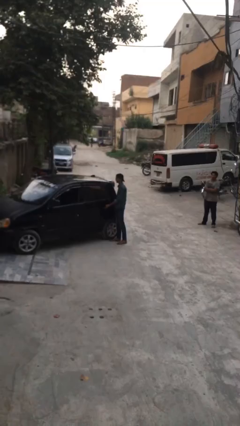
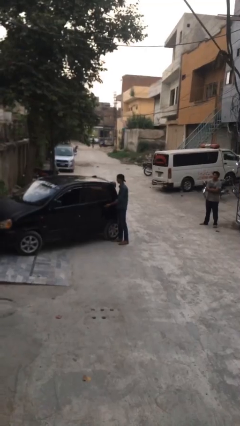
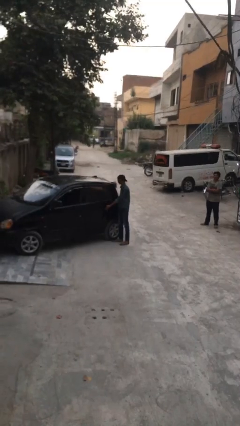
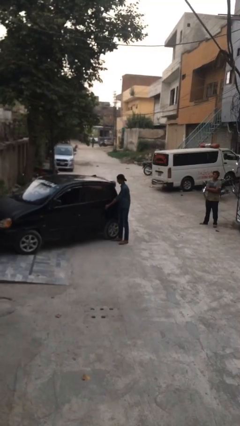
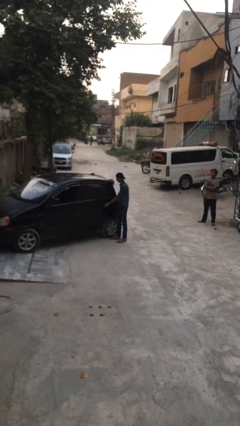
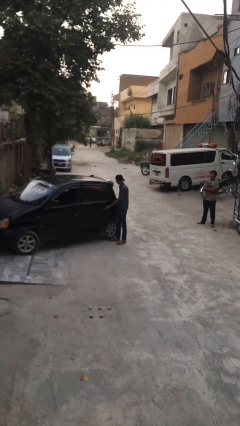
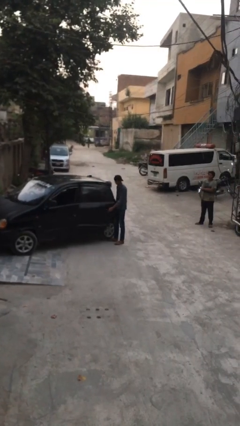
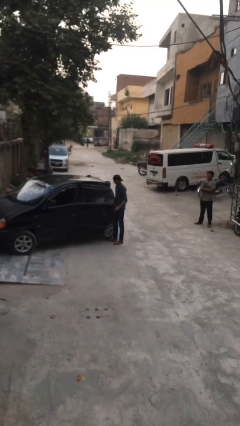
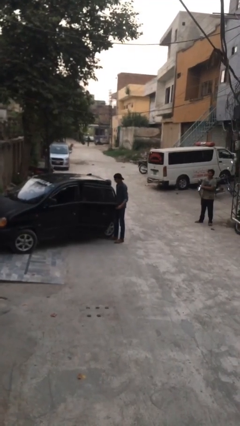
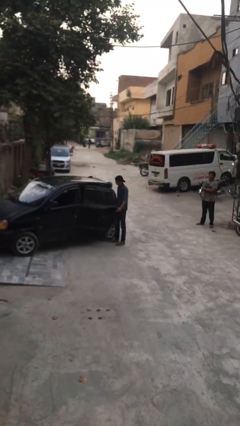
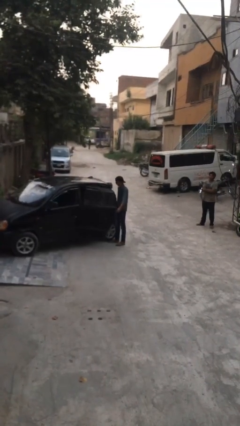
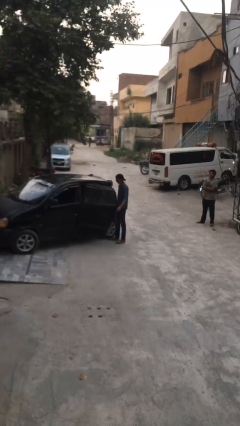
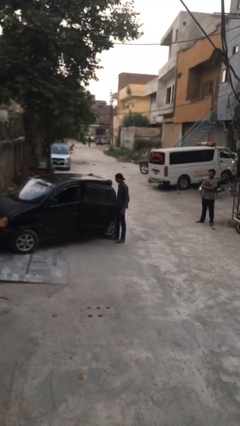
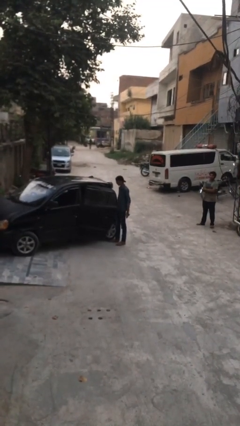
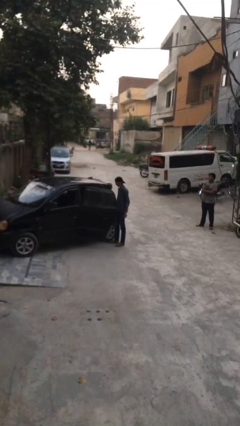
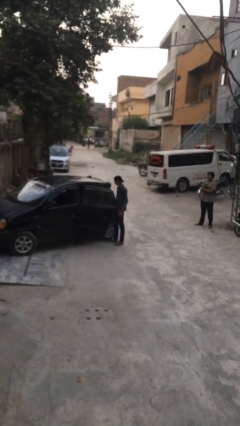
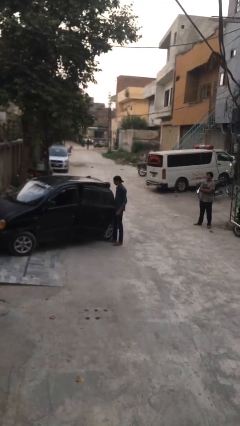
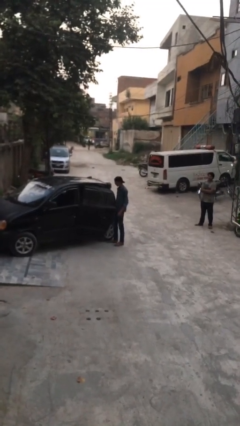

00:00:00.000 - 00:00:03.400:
person opens car door

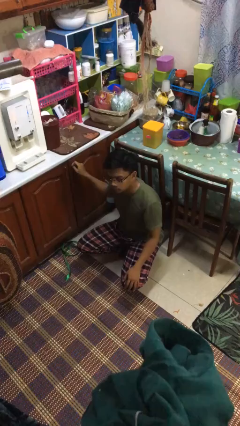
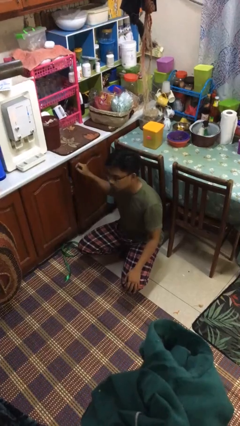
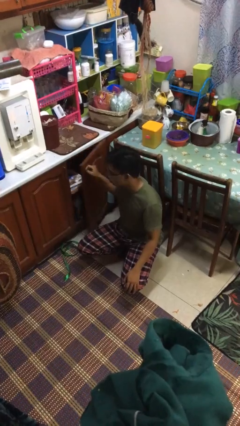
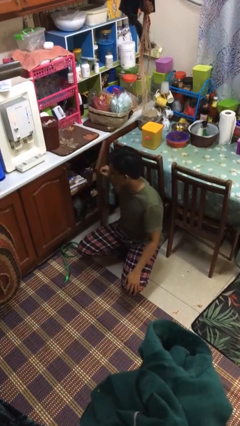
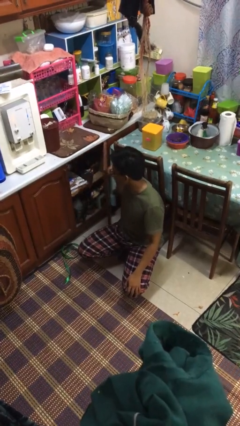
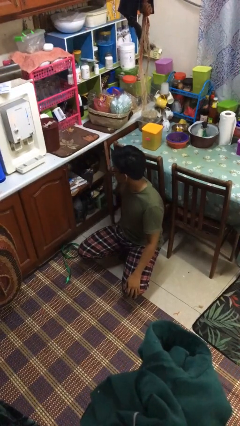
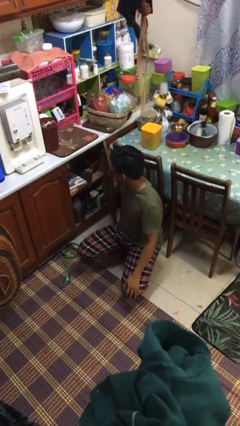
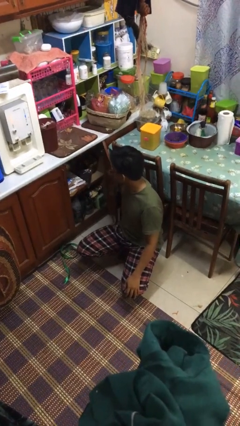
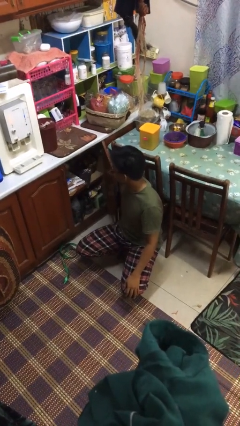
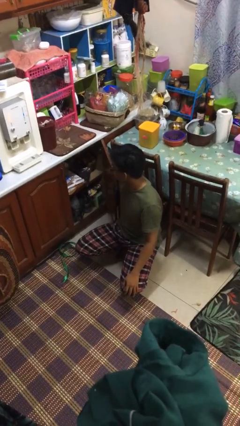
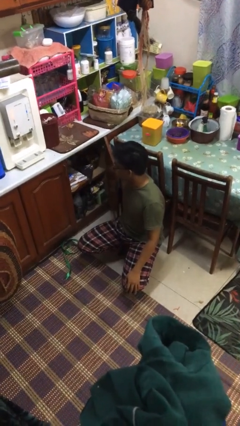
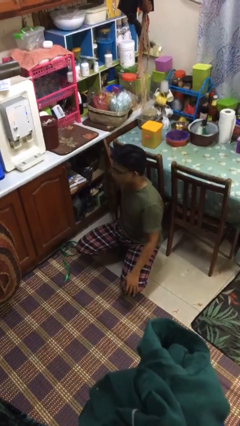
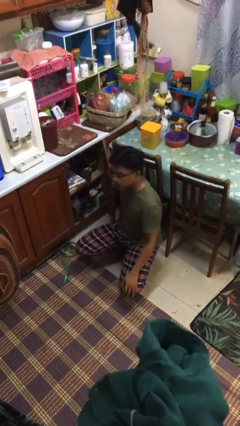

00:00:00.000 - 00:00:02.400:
person opens kitchen drawer

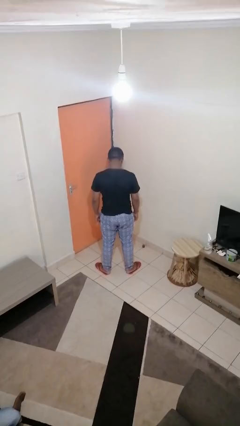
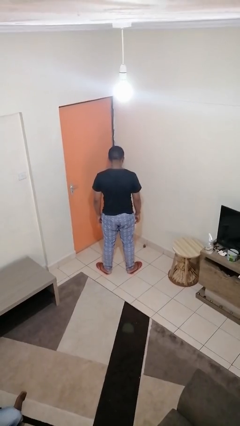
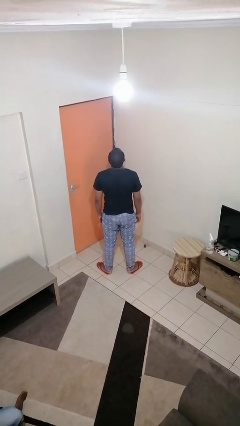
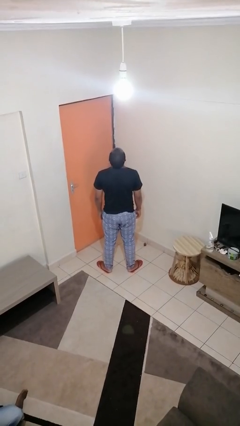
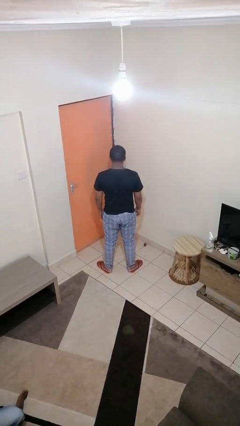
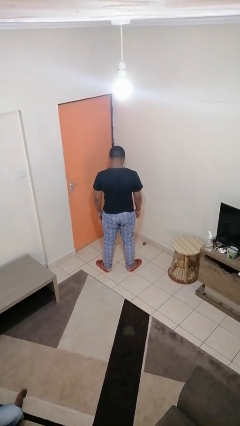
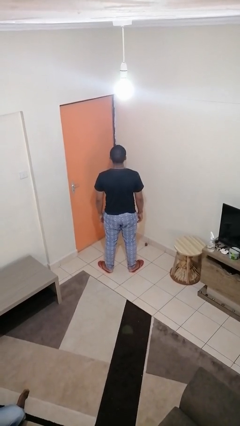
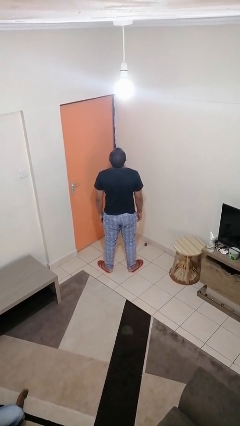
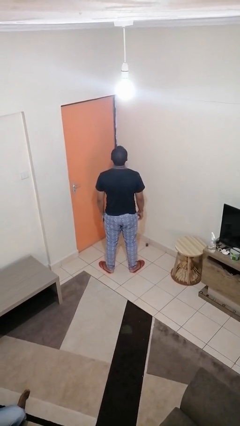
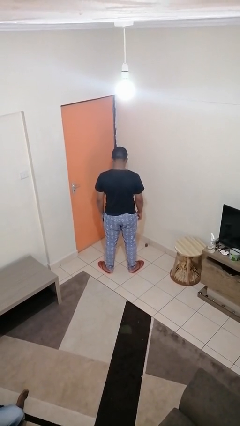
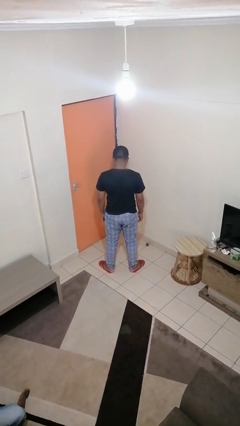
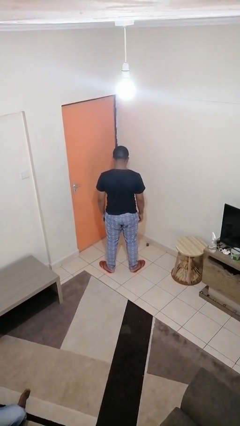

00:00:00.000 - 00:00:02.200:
person nods head

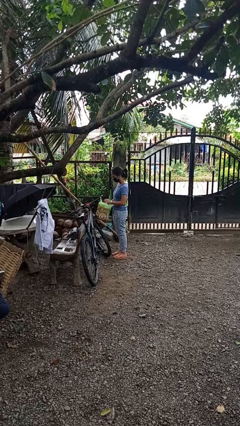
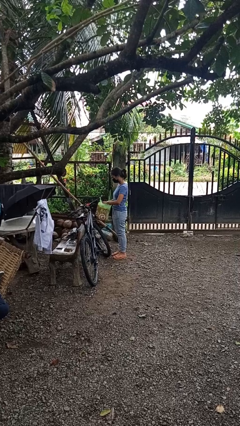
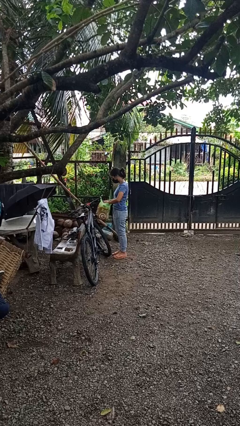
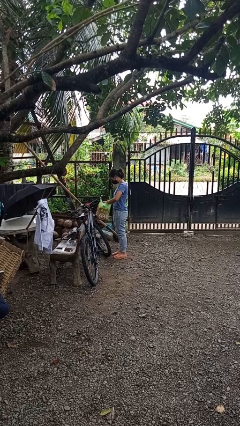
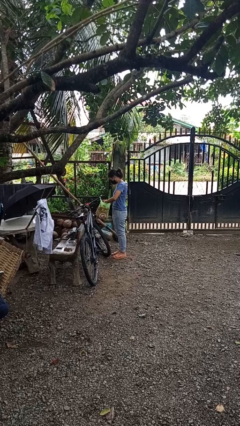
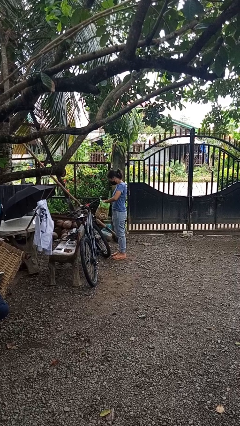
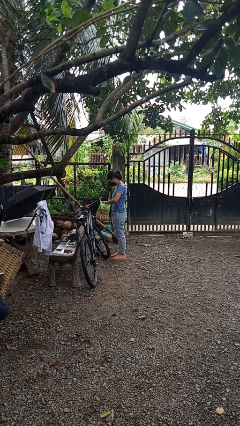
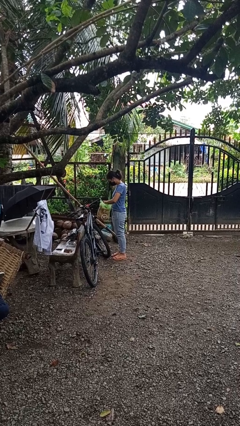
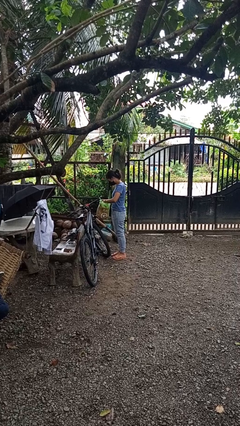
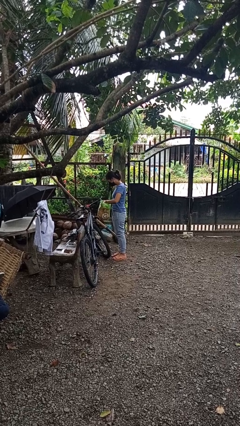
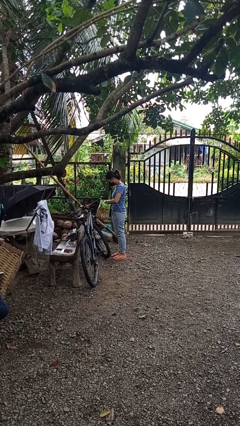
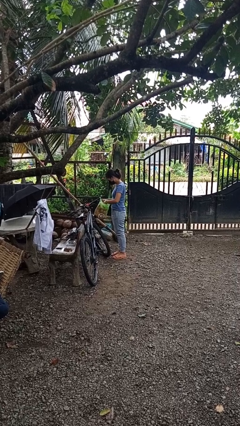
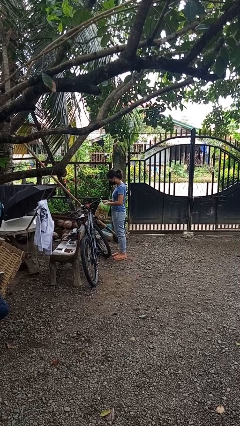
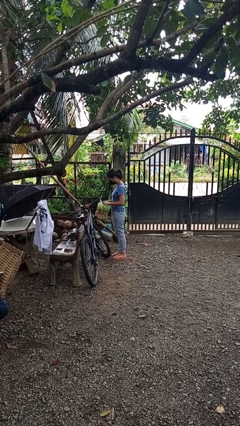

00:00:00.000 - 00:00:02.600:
person searches in bag

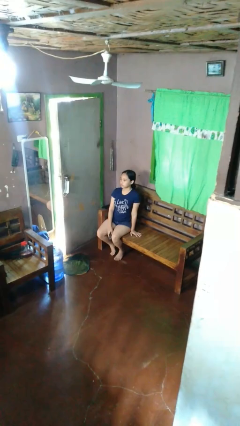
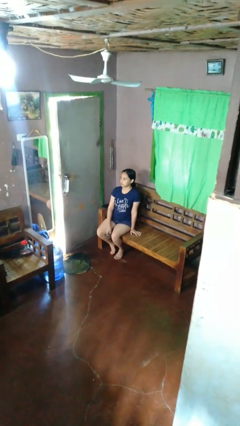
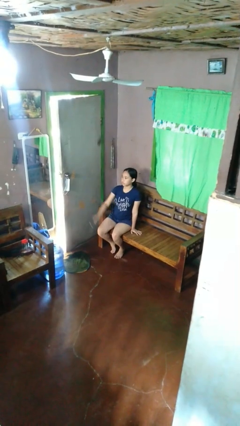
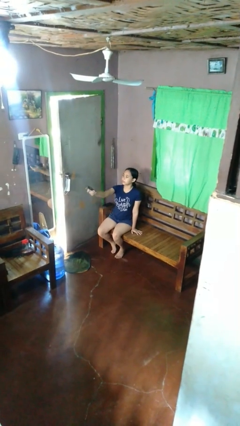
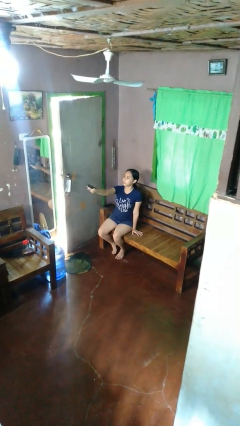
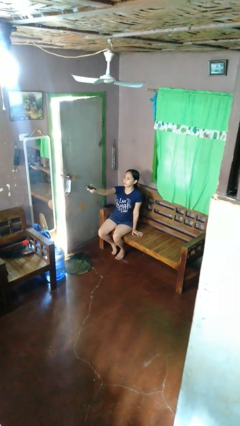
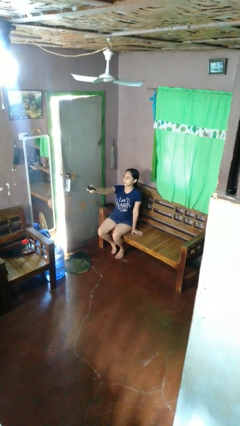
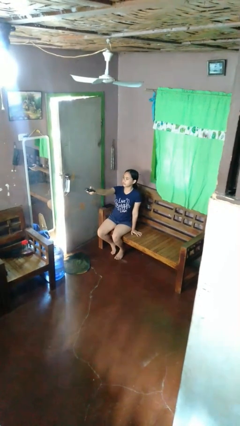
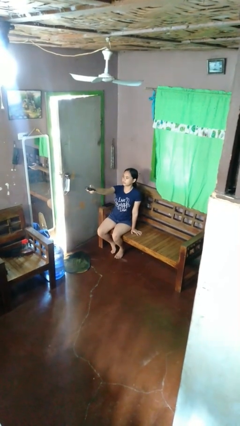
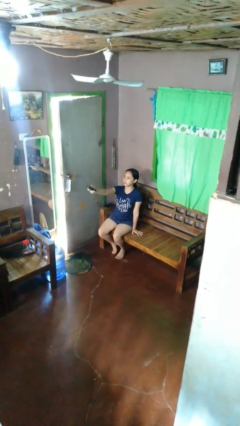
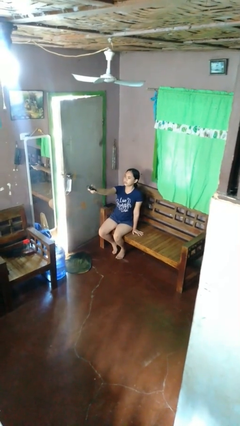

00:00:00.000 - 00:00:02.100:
person uses television remote

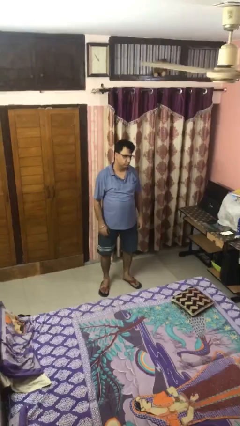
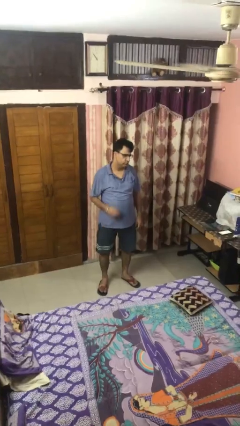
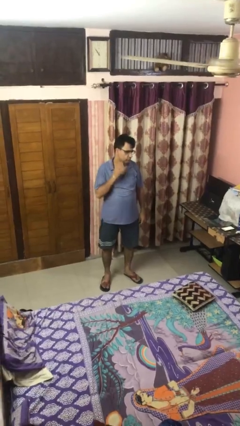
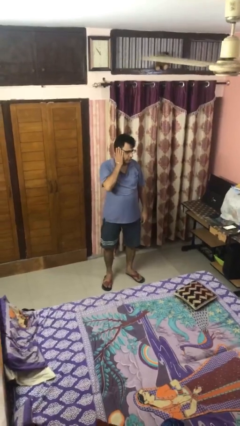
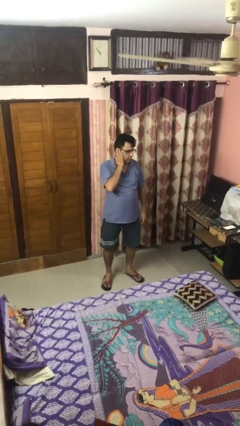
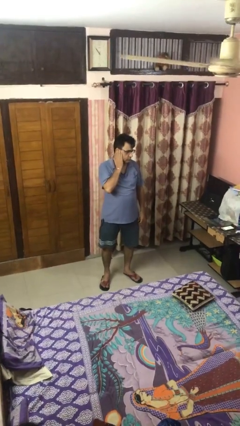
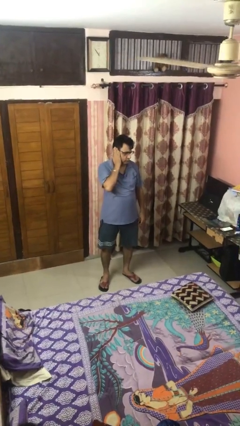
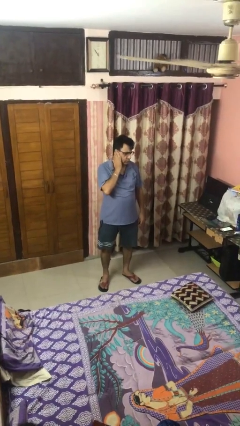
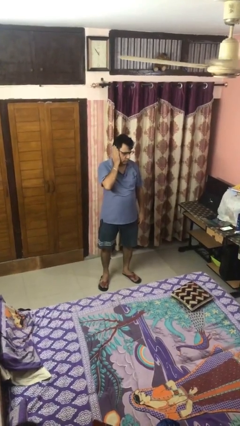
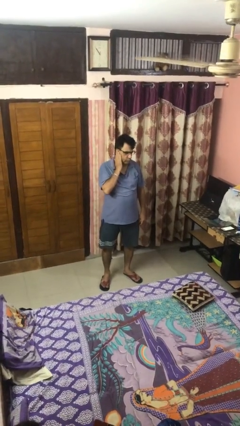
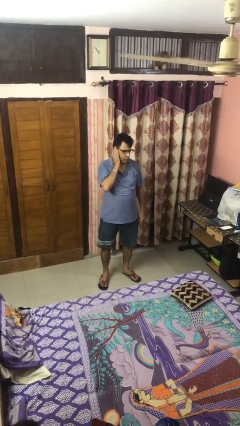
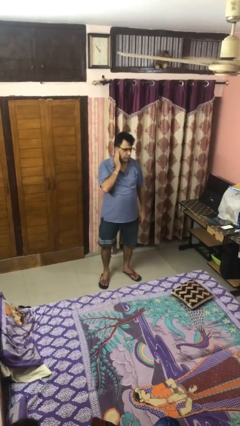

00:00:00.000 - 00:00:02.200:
person touches earlobe

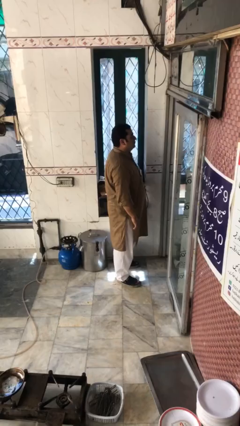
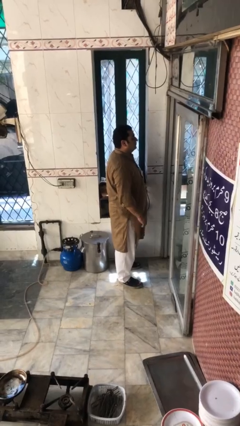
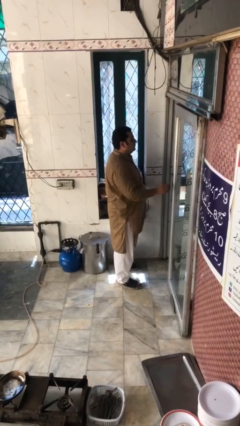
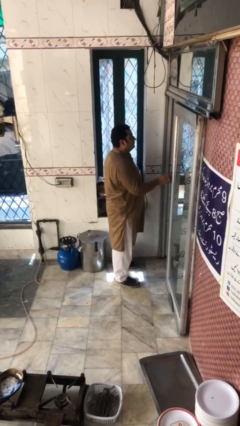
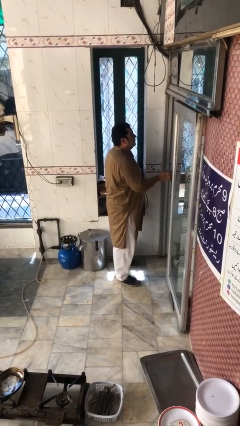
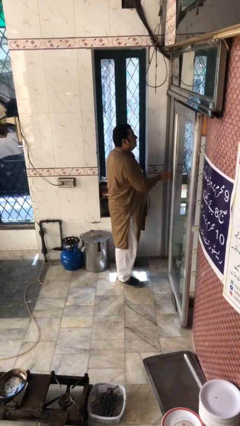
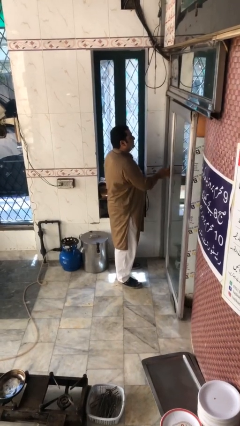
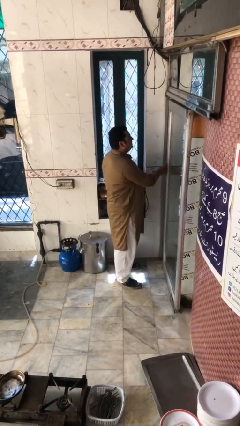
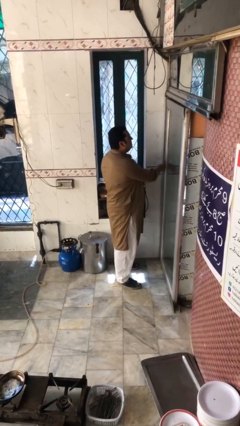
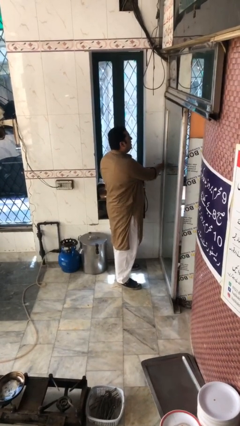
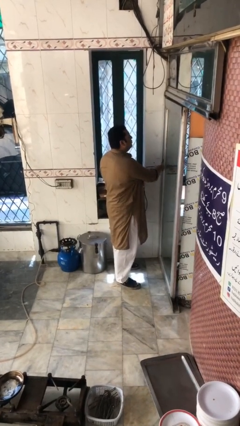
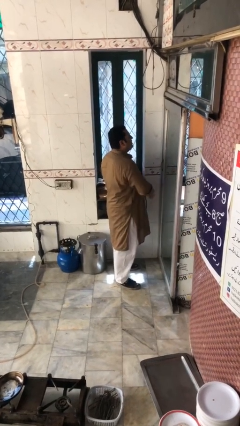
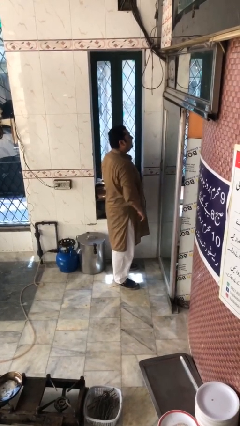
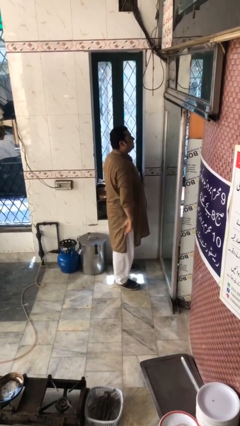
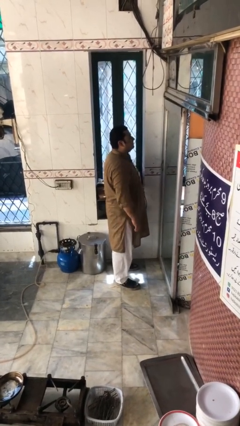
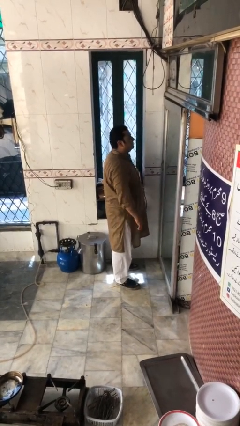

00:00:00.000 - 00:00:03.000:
person closes sliding door
